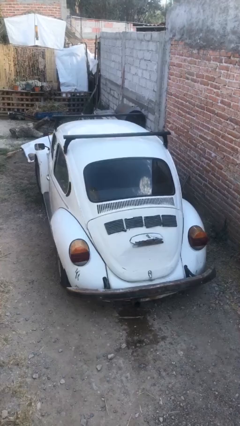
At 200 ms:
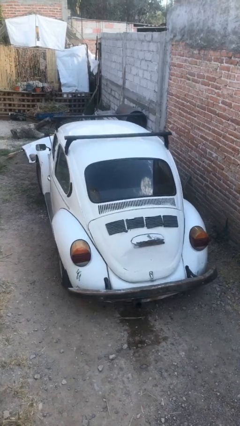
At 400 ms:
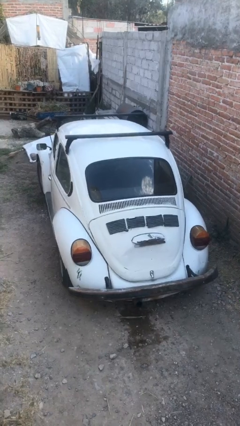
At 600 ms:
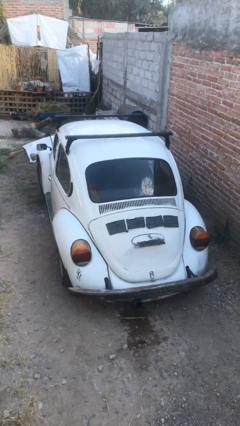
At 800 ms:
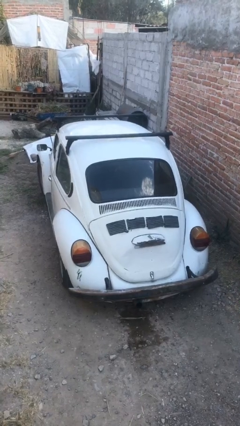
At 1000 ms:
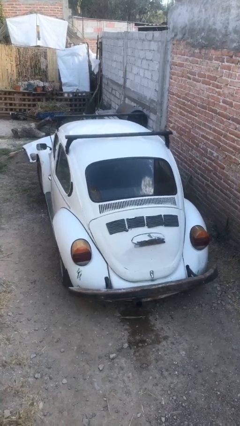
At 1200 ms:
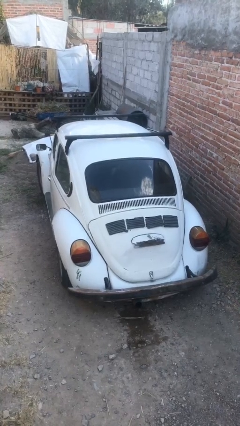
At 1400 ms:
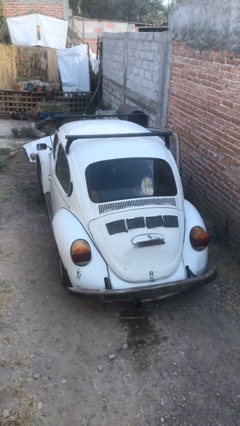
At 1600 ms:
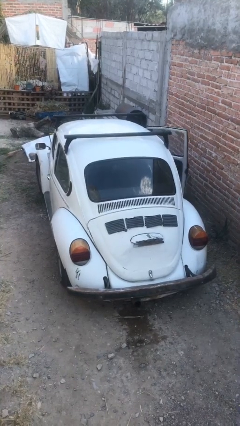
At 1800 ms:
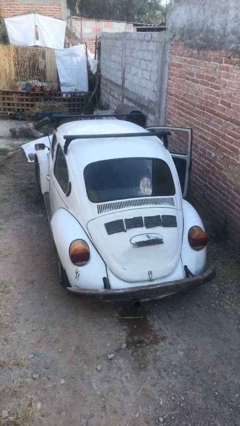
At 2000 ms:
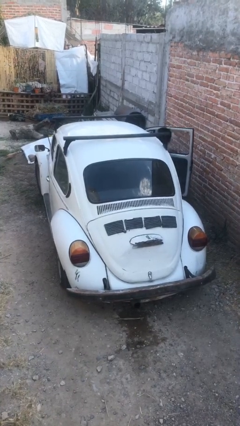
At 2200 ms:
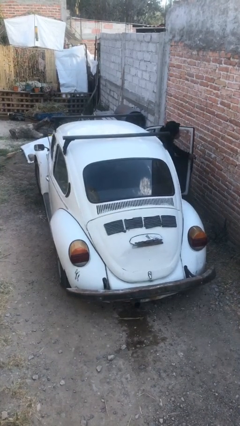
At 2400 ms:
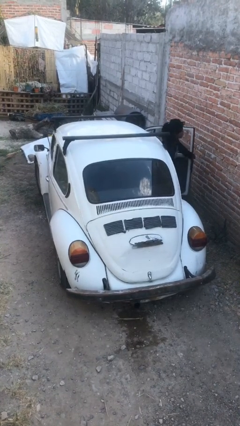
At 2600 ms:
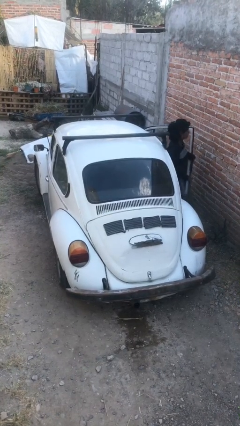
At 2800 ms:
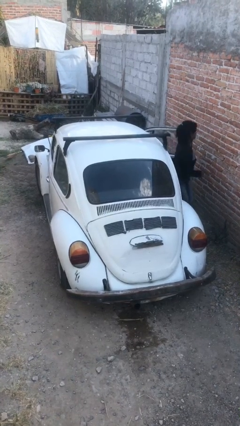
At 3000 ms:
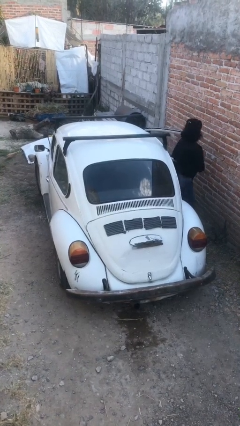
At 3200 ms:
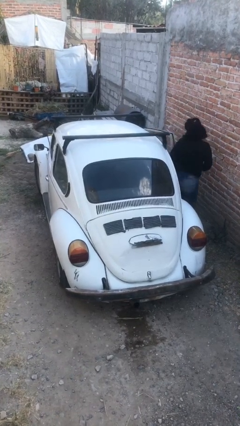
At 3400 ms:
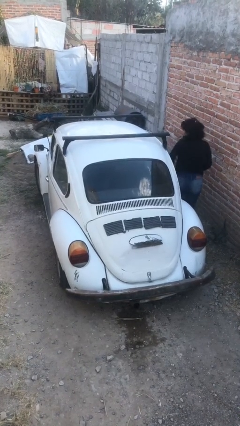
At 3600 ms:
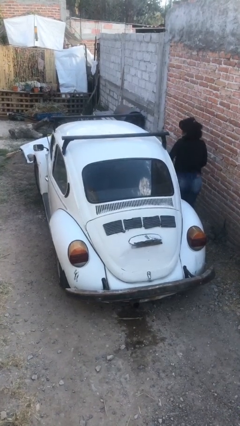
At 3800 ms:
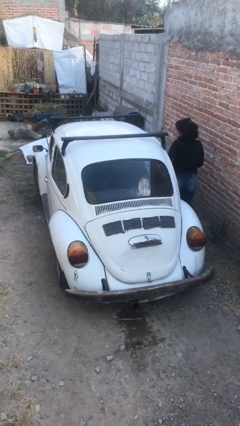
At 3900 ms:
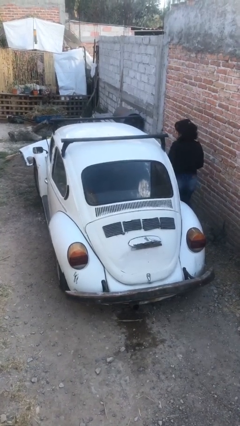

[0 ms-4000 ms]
car drops off person

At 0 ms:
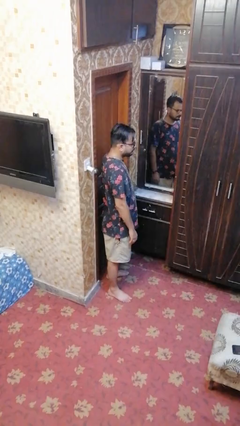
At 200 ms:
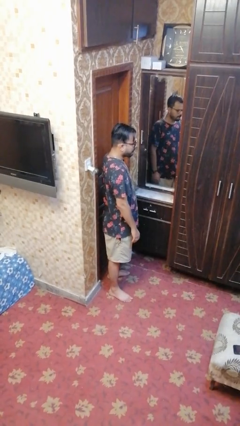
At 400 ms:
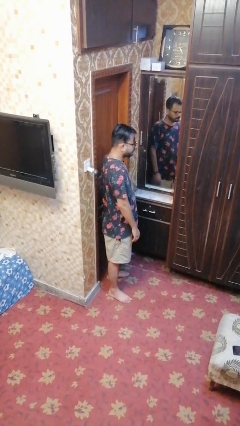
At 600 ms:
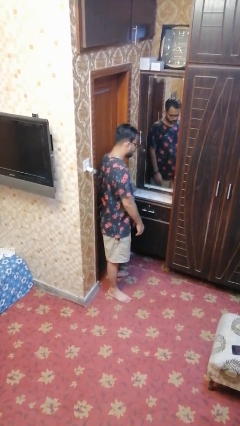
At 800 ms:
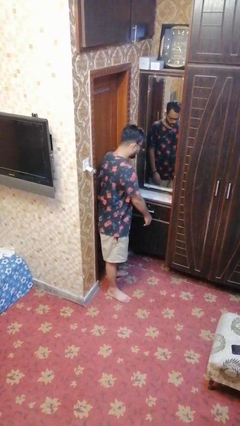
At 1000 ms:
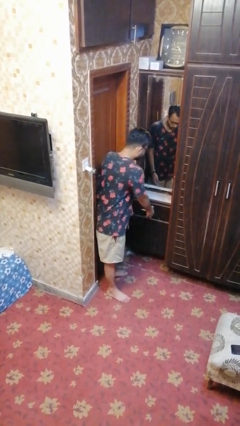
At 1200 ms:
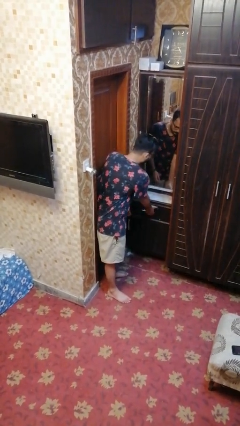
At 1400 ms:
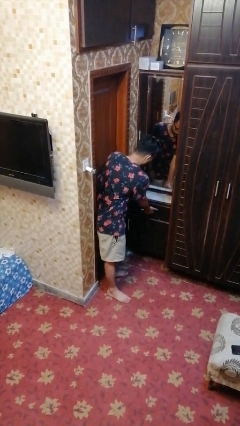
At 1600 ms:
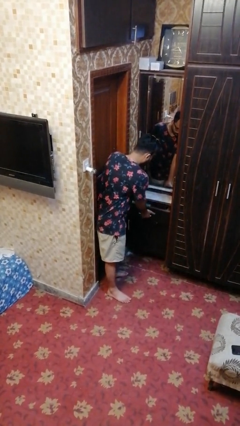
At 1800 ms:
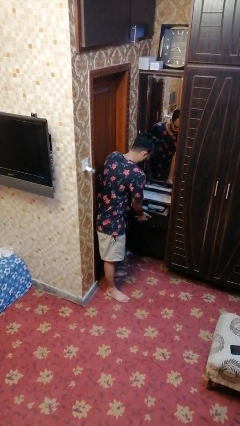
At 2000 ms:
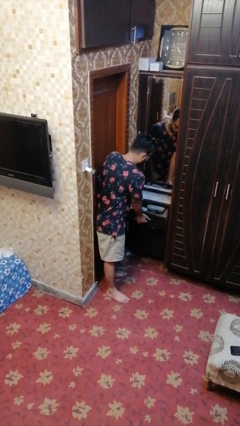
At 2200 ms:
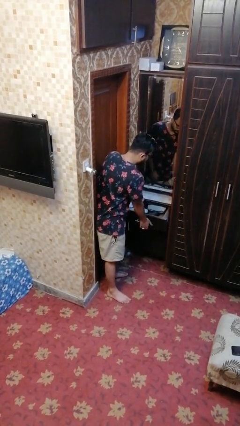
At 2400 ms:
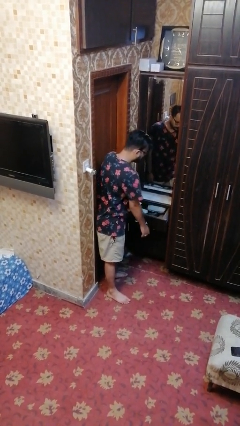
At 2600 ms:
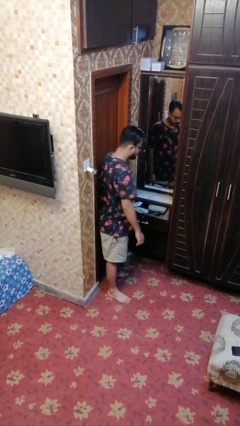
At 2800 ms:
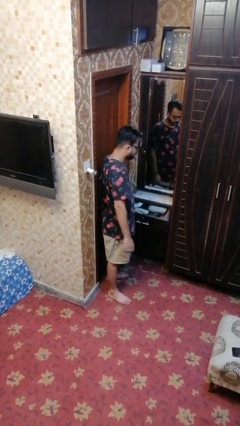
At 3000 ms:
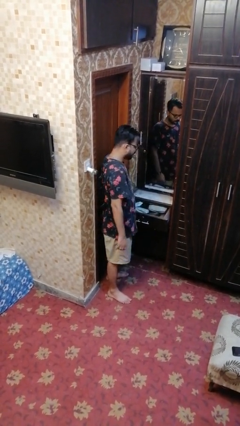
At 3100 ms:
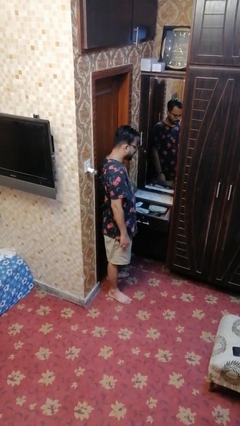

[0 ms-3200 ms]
person opens dresser drawer

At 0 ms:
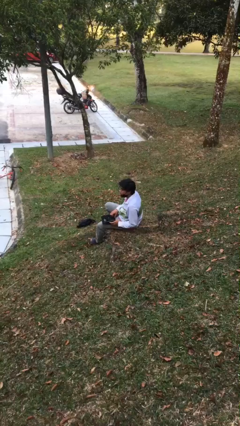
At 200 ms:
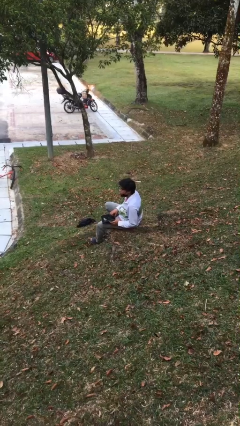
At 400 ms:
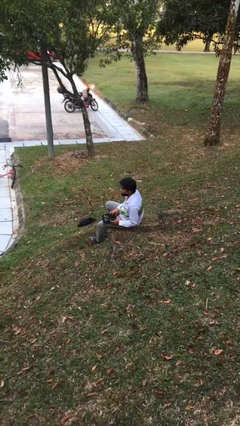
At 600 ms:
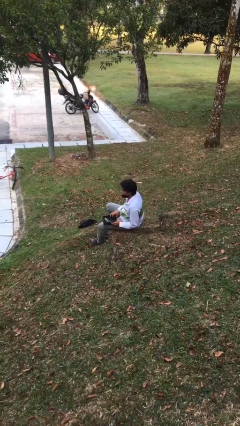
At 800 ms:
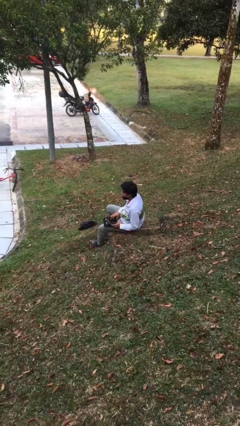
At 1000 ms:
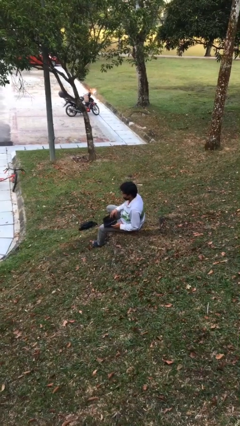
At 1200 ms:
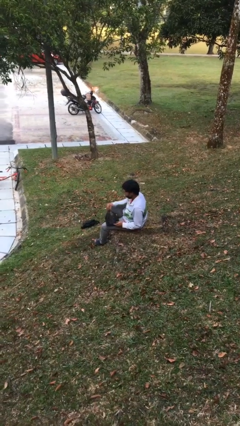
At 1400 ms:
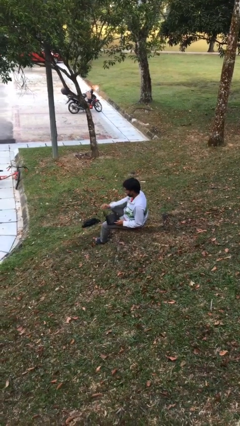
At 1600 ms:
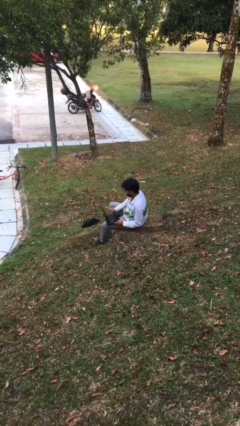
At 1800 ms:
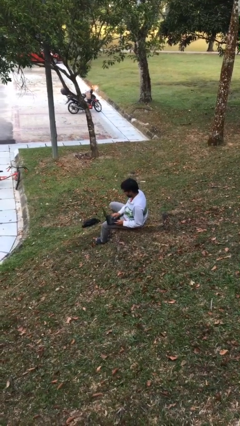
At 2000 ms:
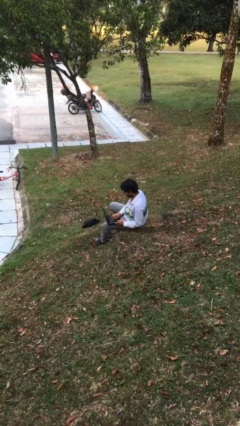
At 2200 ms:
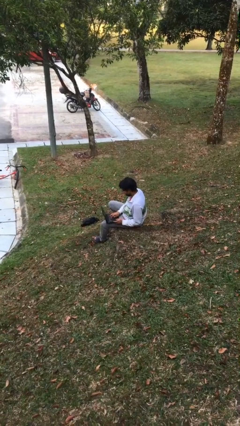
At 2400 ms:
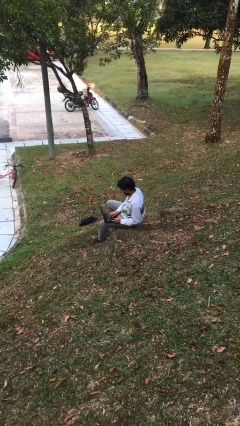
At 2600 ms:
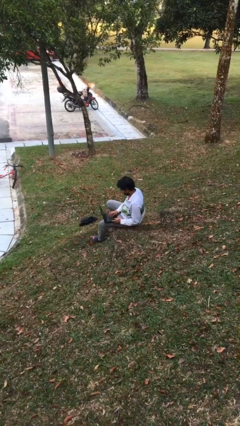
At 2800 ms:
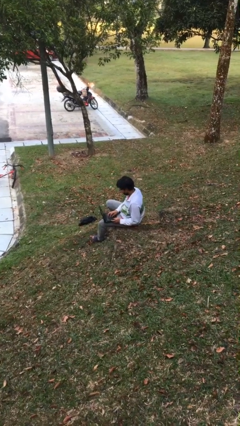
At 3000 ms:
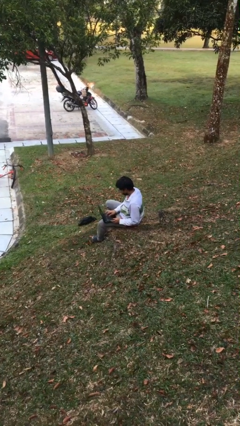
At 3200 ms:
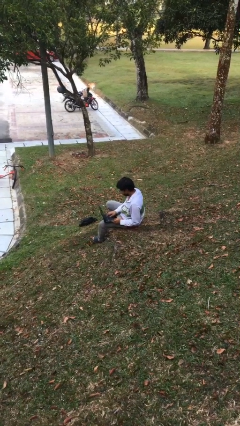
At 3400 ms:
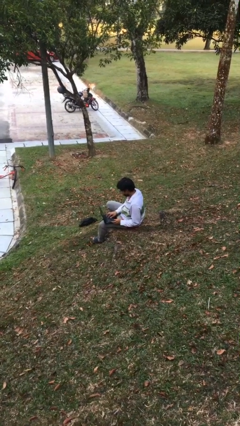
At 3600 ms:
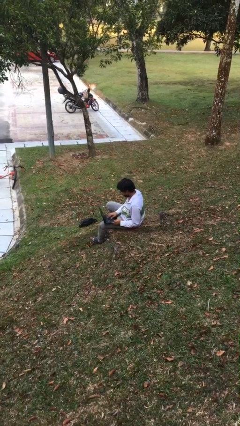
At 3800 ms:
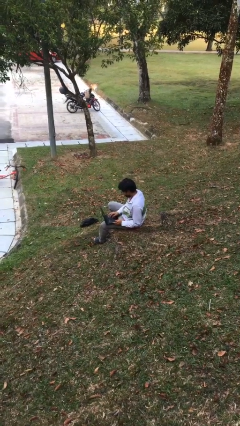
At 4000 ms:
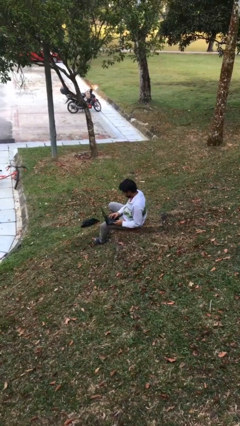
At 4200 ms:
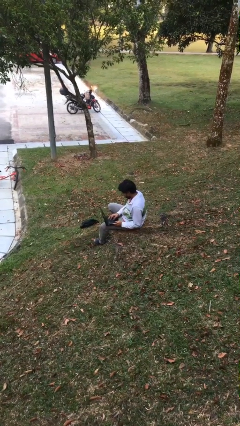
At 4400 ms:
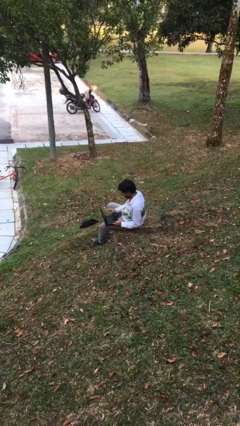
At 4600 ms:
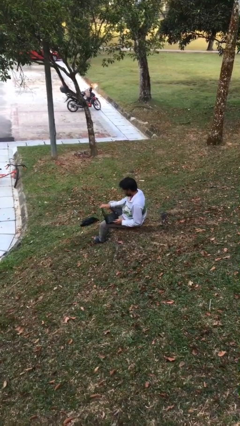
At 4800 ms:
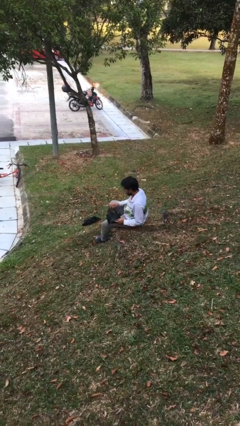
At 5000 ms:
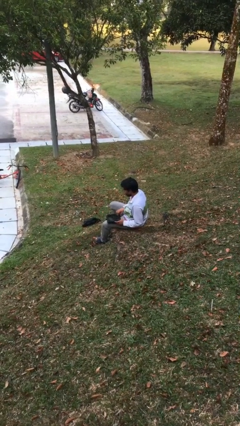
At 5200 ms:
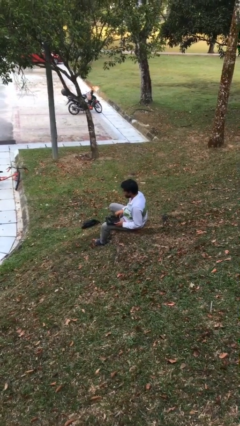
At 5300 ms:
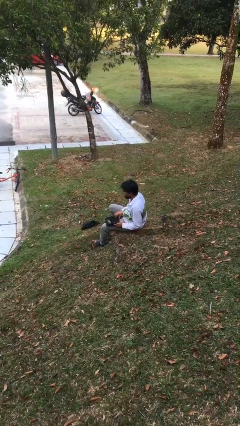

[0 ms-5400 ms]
person interacts with laptop

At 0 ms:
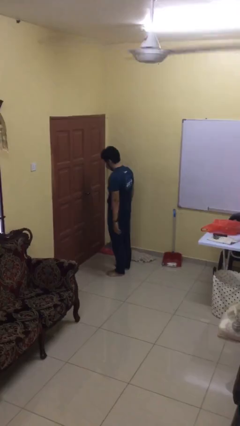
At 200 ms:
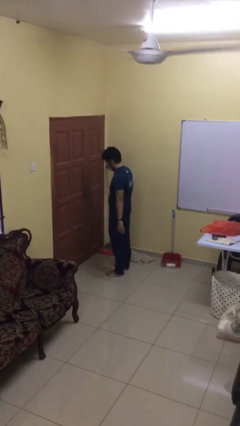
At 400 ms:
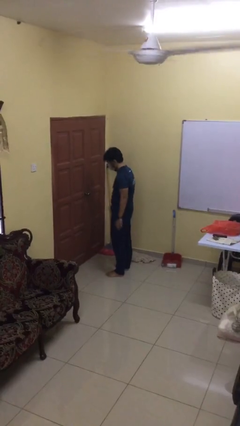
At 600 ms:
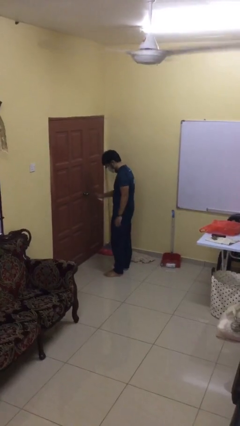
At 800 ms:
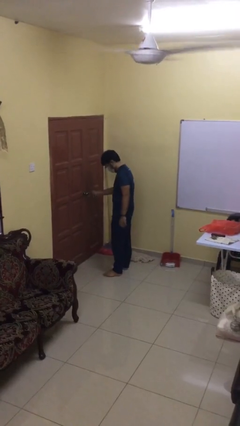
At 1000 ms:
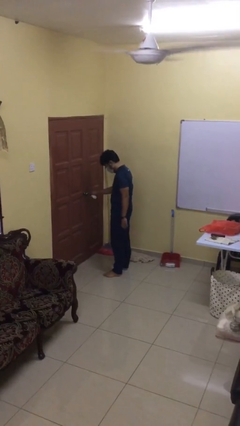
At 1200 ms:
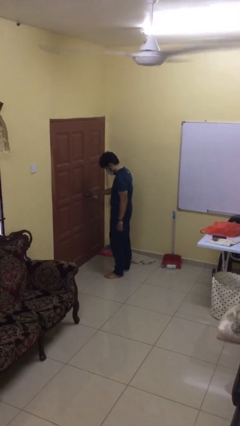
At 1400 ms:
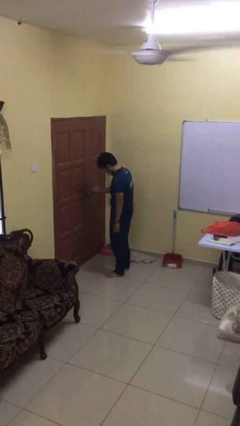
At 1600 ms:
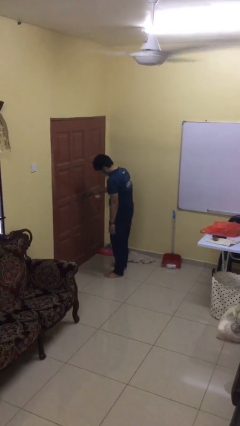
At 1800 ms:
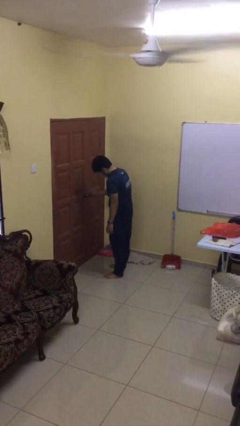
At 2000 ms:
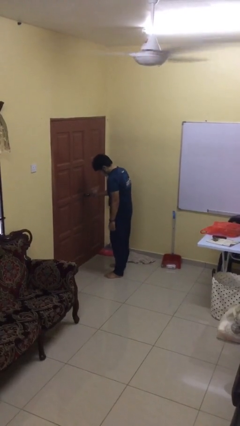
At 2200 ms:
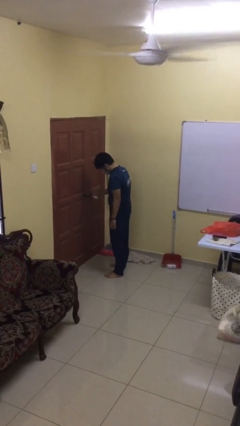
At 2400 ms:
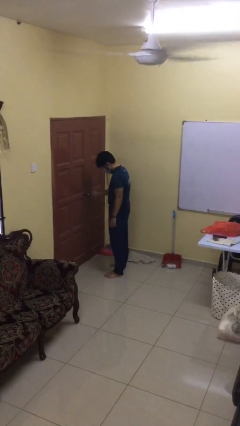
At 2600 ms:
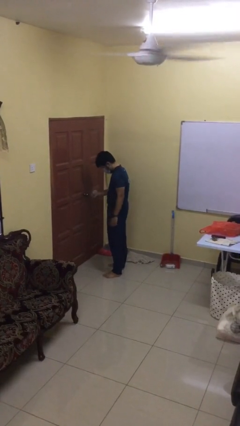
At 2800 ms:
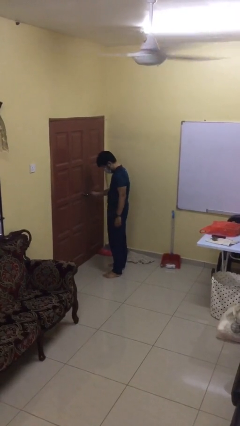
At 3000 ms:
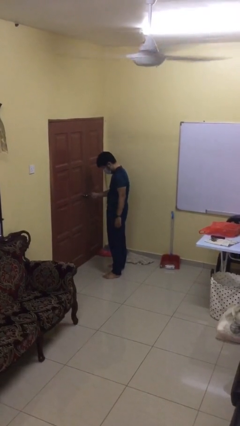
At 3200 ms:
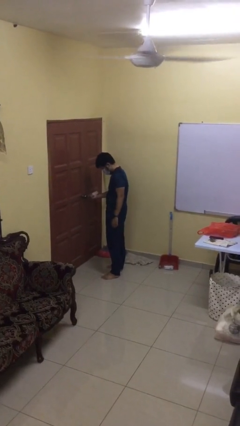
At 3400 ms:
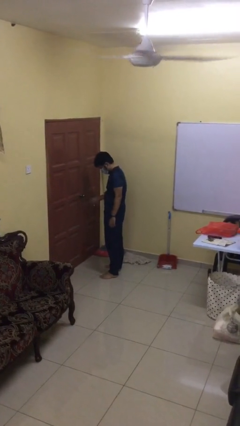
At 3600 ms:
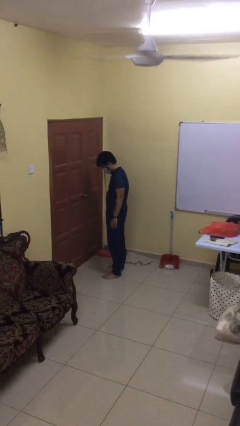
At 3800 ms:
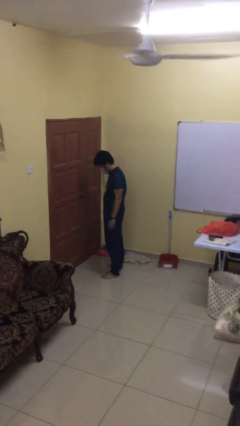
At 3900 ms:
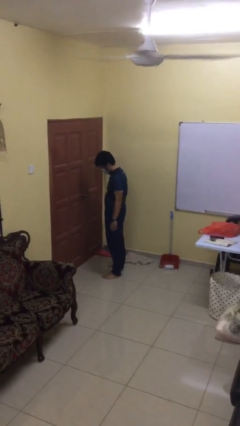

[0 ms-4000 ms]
person locks door with keys

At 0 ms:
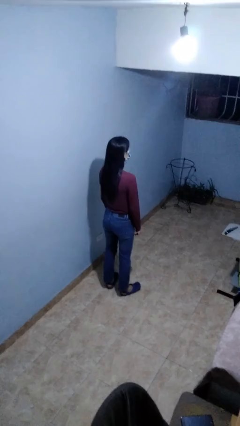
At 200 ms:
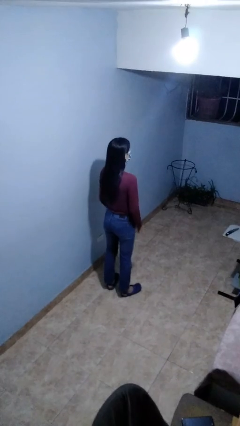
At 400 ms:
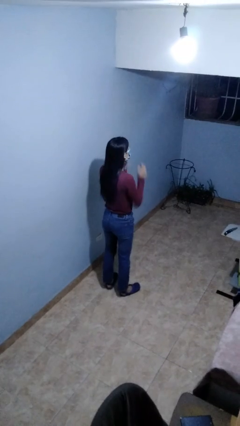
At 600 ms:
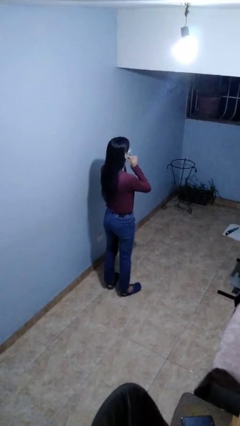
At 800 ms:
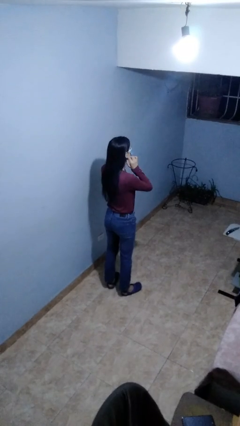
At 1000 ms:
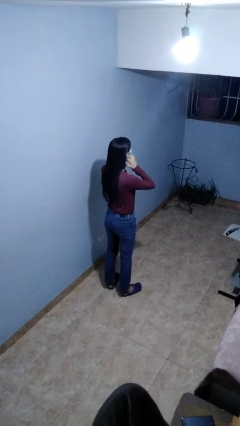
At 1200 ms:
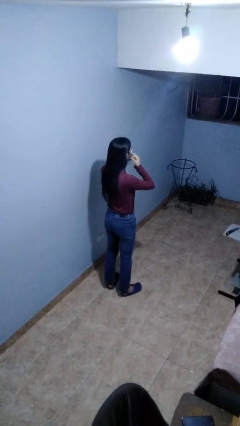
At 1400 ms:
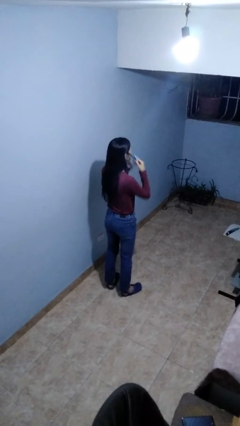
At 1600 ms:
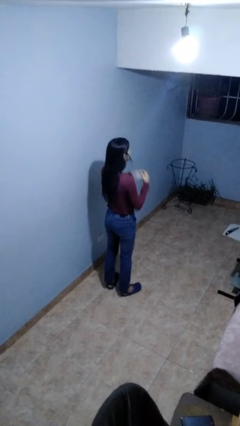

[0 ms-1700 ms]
person takes off facemask
